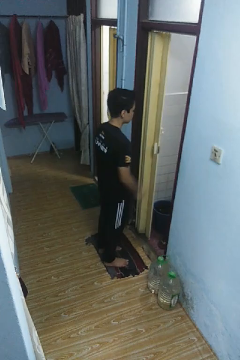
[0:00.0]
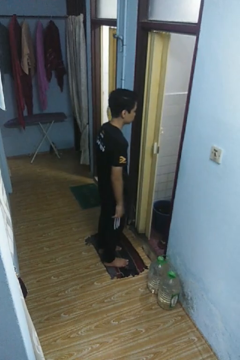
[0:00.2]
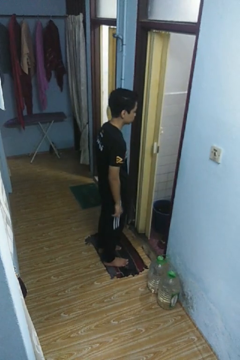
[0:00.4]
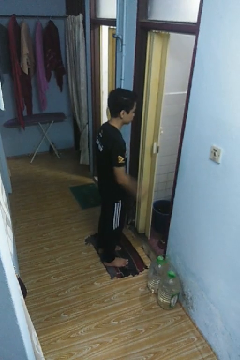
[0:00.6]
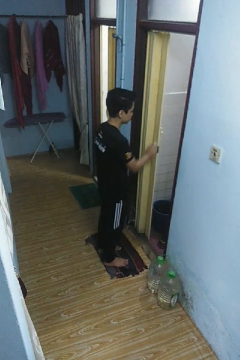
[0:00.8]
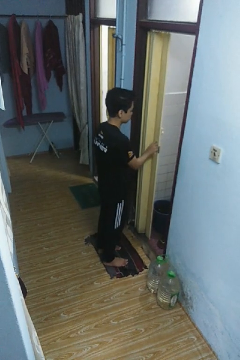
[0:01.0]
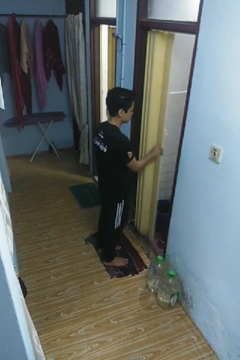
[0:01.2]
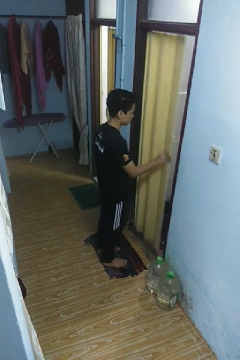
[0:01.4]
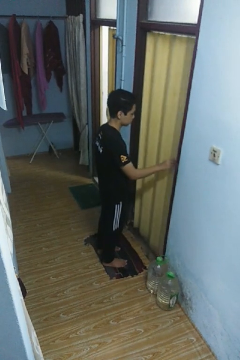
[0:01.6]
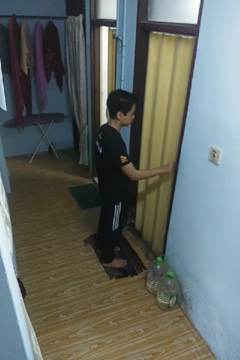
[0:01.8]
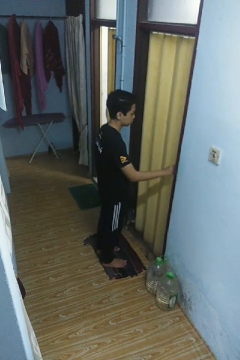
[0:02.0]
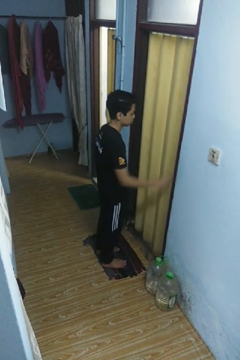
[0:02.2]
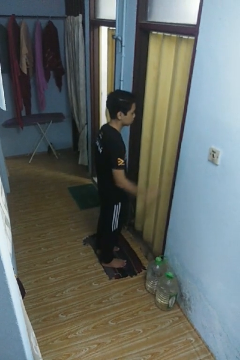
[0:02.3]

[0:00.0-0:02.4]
person closes sliding door

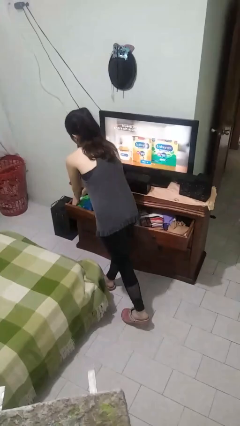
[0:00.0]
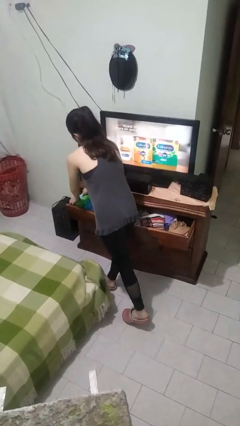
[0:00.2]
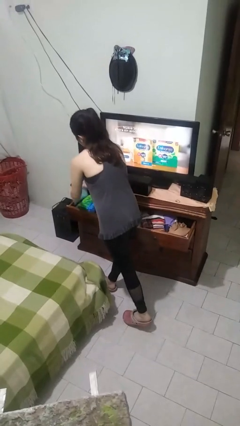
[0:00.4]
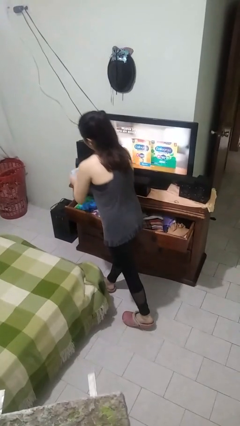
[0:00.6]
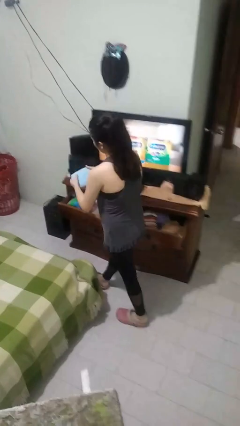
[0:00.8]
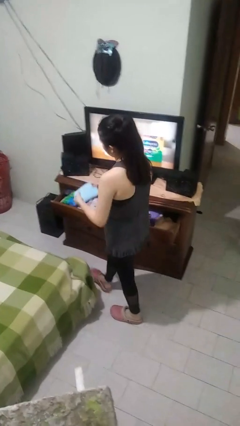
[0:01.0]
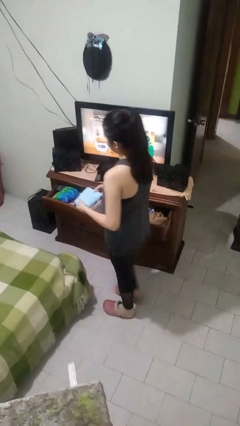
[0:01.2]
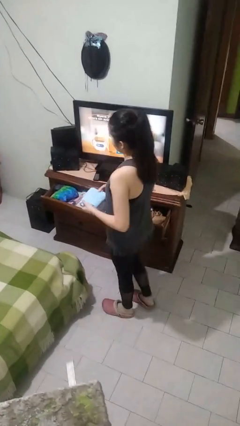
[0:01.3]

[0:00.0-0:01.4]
person takes clothes from dresser

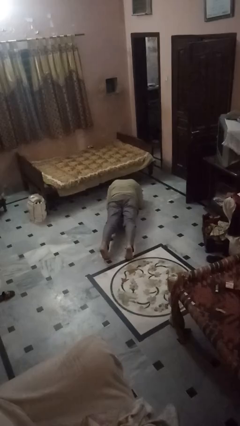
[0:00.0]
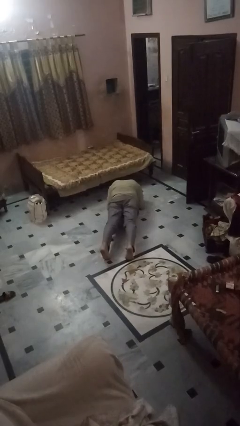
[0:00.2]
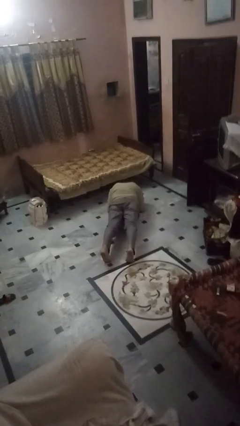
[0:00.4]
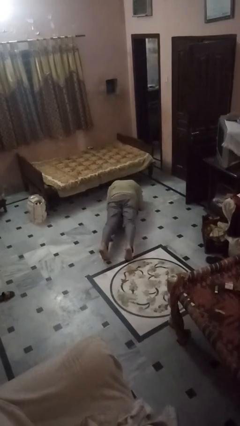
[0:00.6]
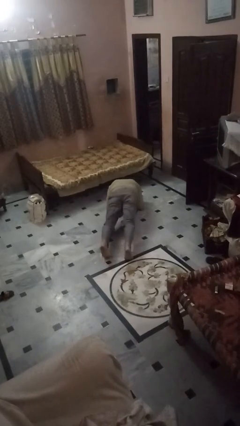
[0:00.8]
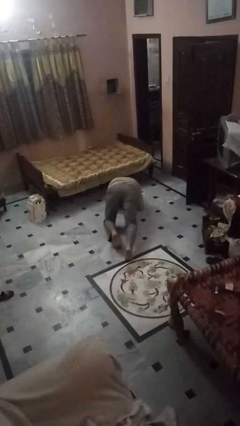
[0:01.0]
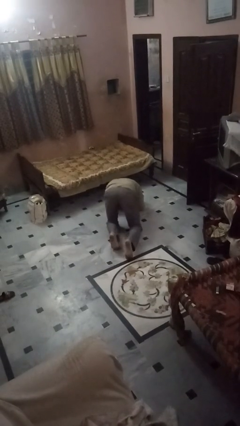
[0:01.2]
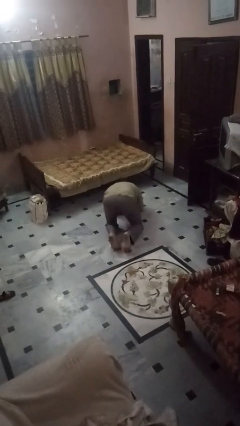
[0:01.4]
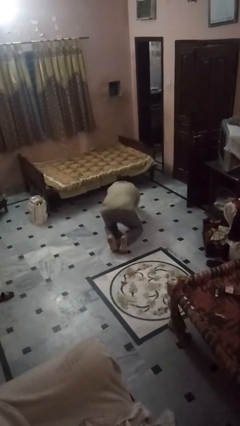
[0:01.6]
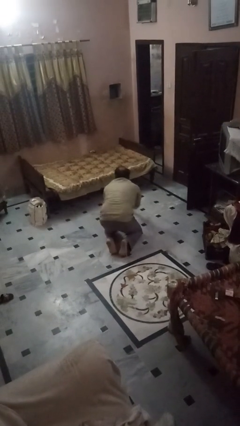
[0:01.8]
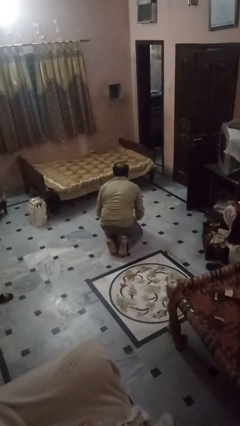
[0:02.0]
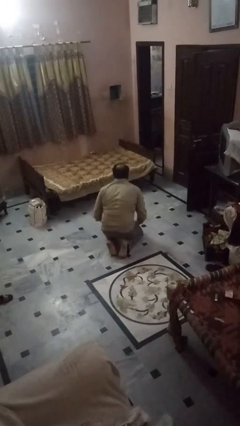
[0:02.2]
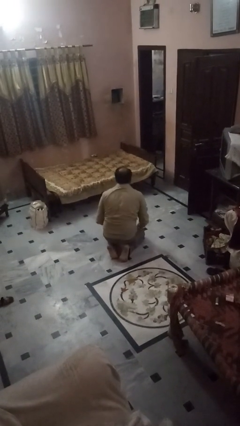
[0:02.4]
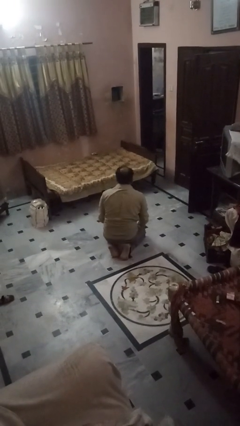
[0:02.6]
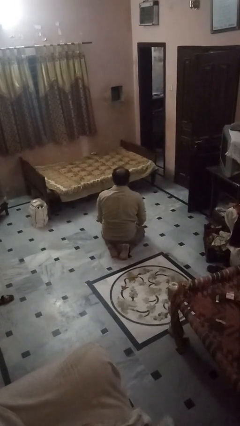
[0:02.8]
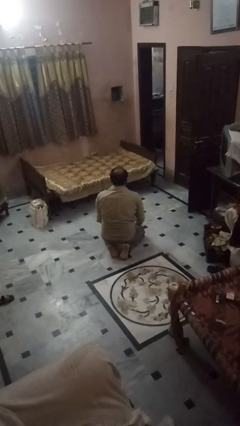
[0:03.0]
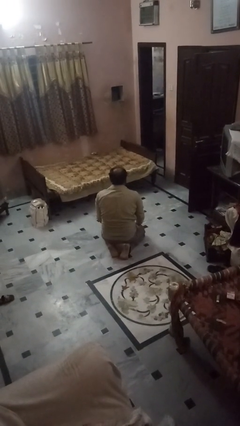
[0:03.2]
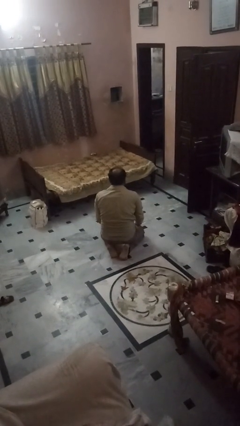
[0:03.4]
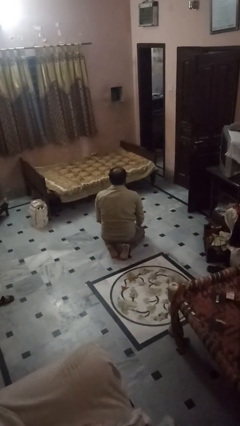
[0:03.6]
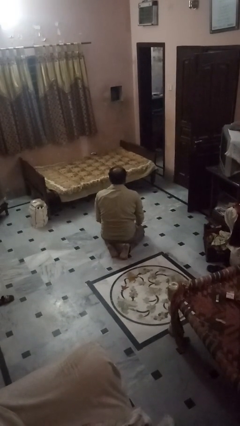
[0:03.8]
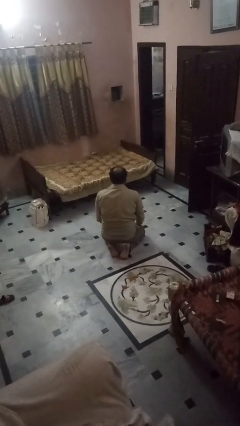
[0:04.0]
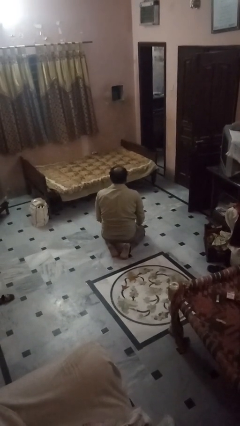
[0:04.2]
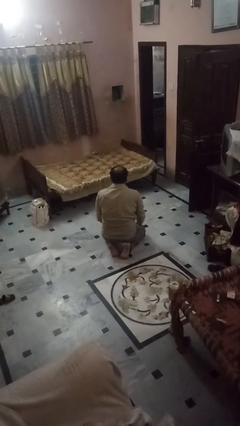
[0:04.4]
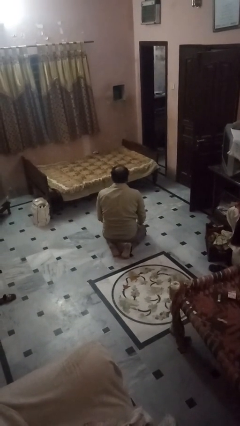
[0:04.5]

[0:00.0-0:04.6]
person stands up from floor

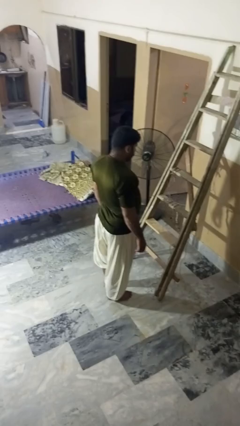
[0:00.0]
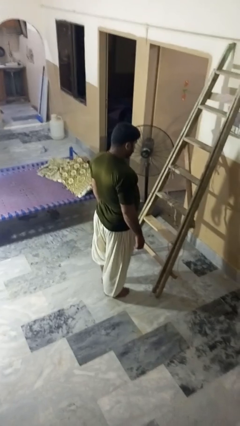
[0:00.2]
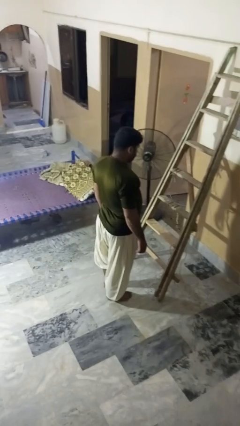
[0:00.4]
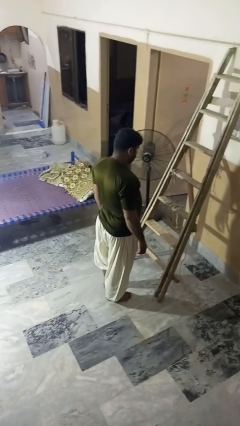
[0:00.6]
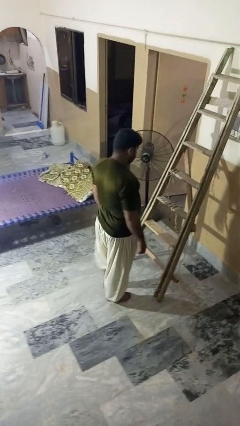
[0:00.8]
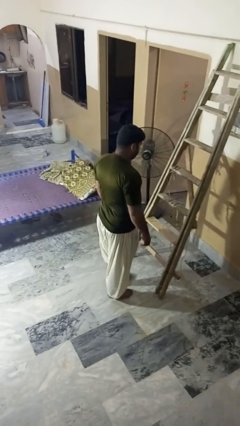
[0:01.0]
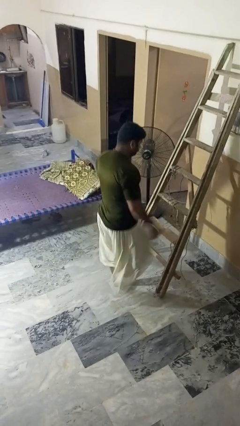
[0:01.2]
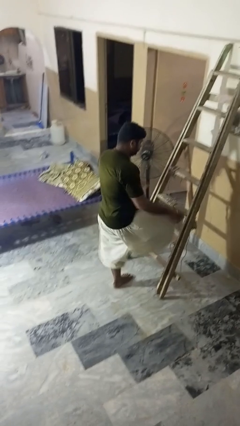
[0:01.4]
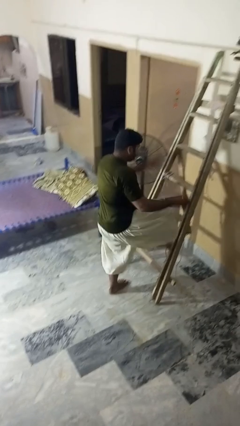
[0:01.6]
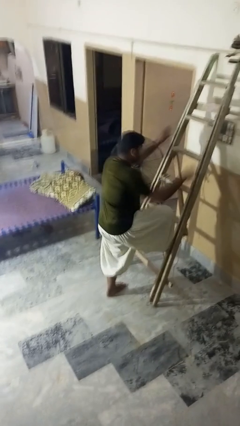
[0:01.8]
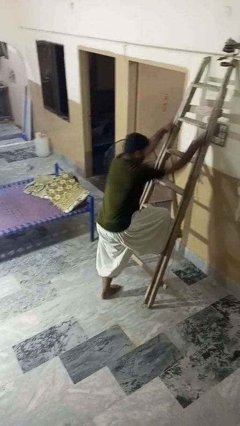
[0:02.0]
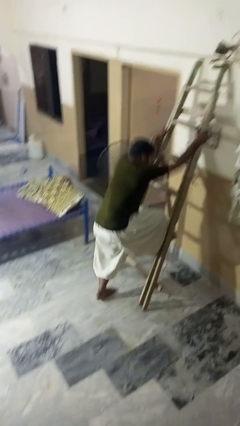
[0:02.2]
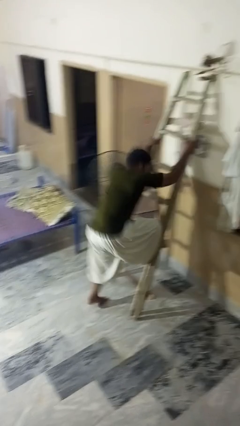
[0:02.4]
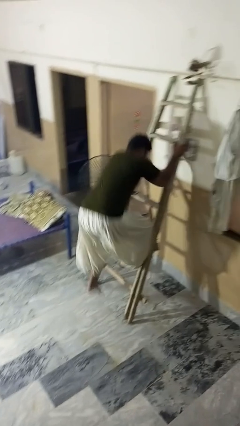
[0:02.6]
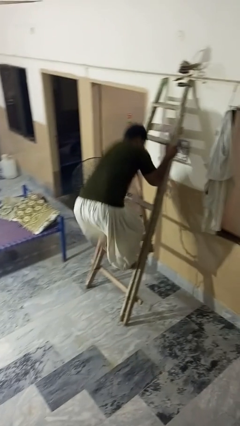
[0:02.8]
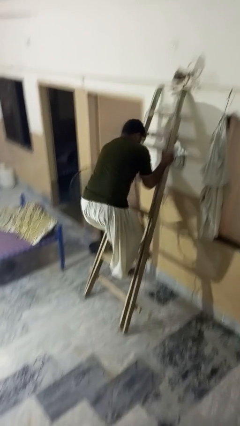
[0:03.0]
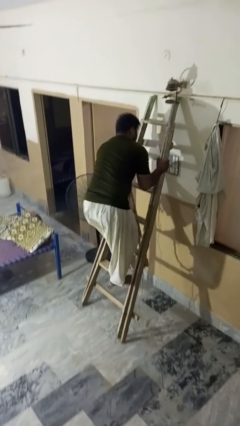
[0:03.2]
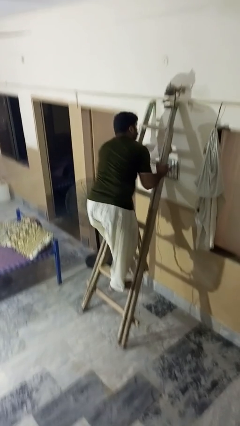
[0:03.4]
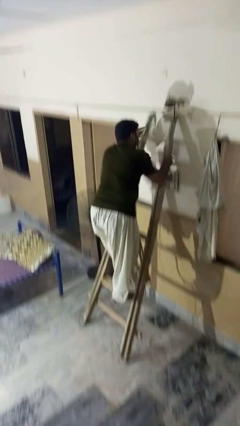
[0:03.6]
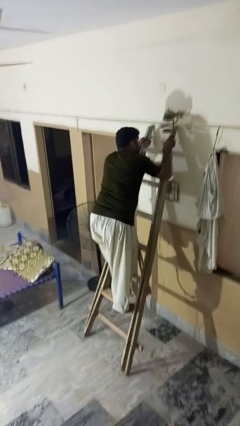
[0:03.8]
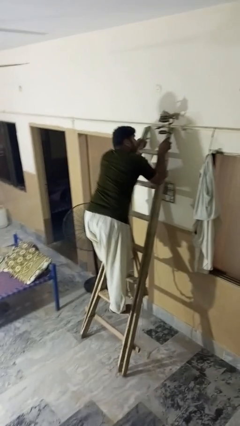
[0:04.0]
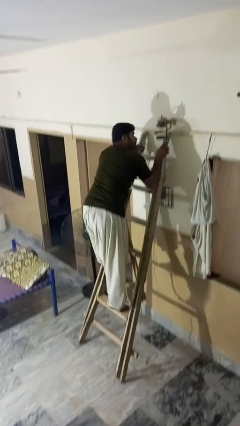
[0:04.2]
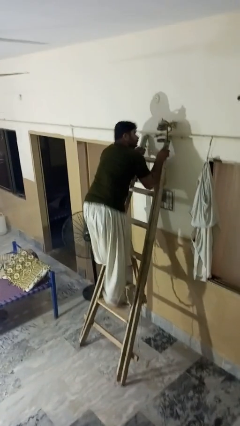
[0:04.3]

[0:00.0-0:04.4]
person climbs up ladder

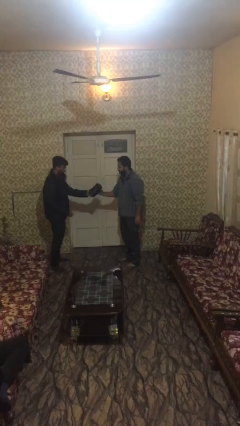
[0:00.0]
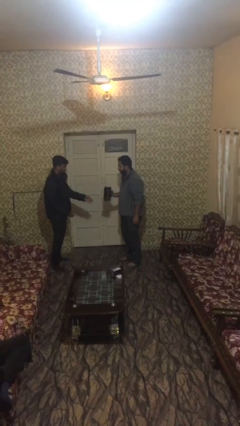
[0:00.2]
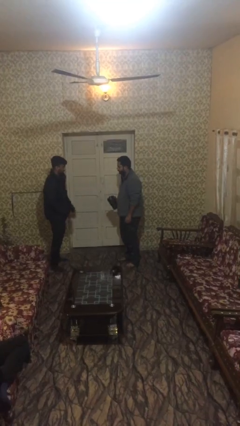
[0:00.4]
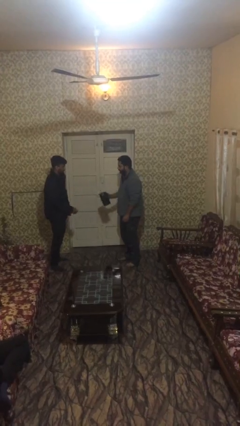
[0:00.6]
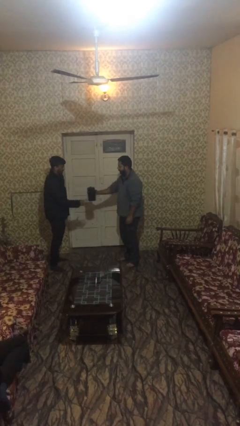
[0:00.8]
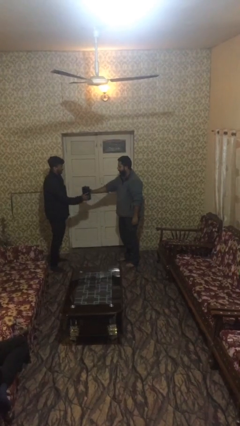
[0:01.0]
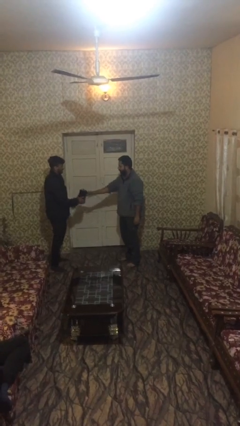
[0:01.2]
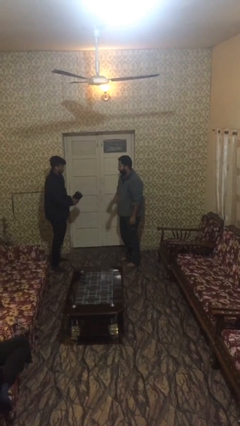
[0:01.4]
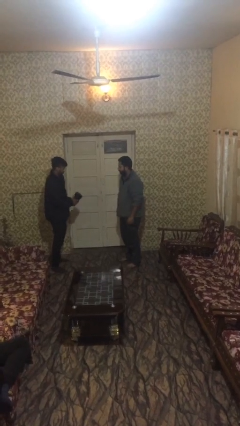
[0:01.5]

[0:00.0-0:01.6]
person transfers object to person

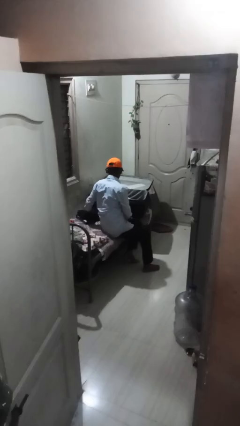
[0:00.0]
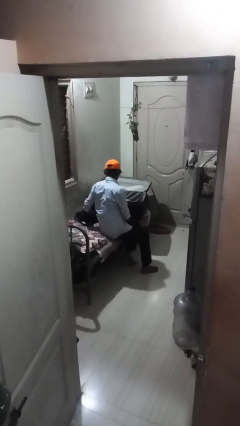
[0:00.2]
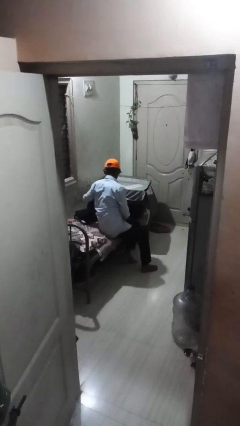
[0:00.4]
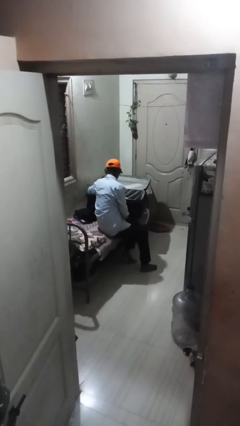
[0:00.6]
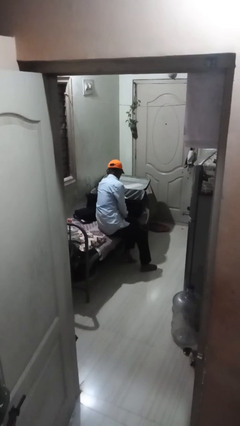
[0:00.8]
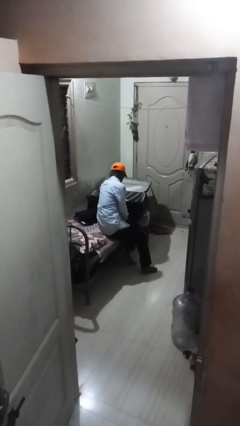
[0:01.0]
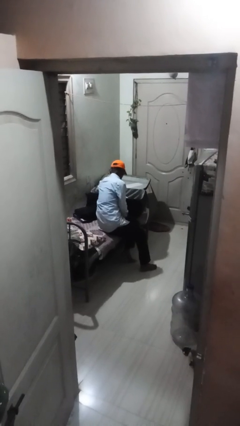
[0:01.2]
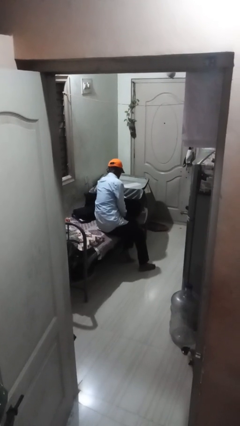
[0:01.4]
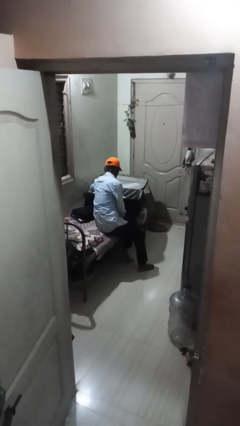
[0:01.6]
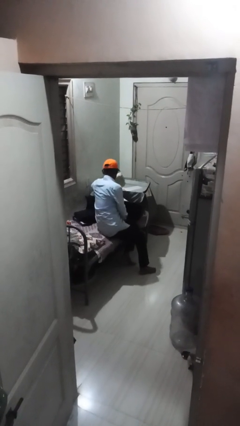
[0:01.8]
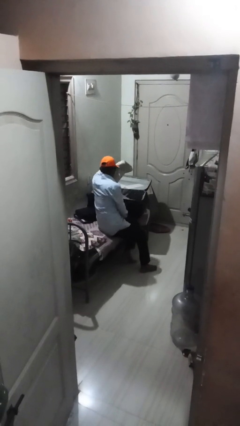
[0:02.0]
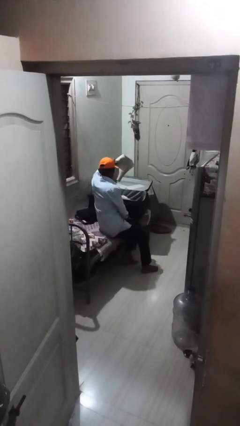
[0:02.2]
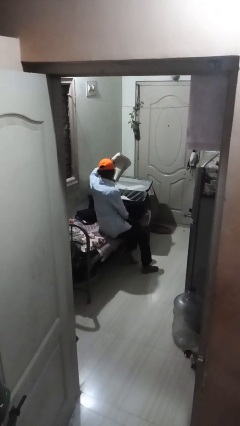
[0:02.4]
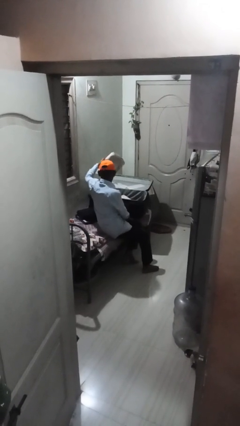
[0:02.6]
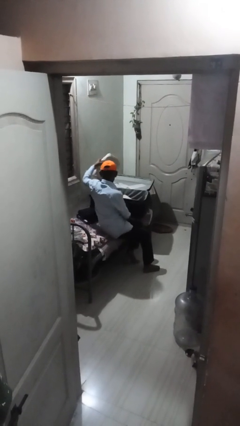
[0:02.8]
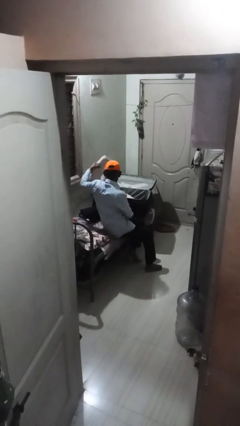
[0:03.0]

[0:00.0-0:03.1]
person unloads clothes from suitcase

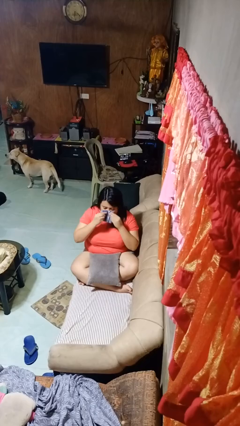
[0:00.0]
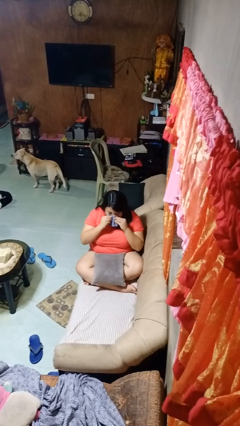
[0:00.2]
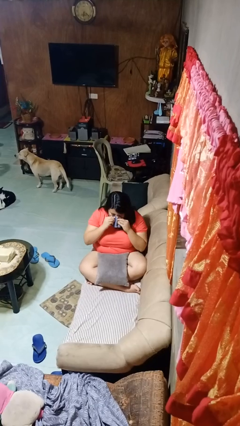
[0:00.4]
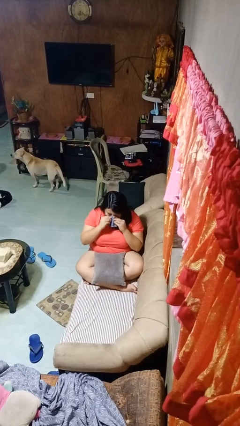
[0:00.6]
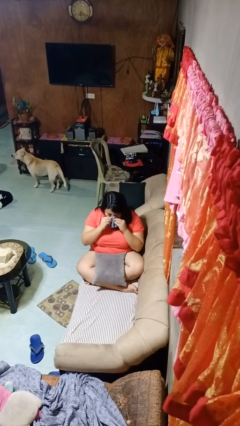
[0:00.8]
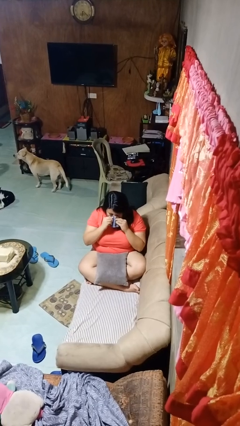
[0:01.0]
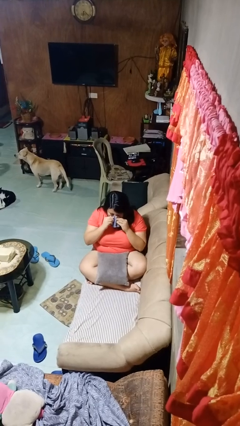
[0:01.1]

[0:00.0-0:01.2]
person blows nose
